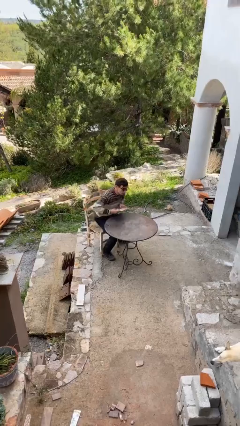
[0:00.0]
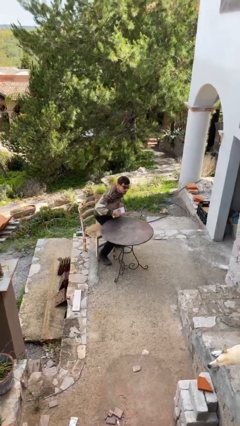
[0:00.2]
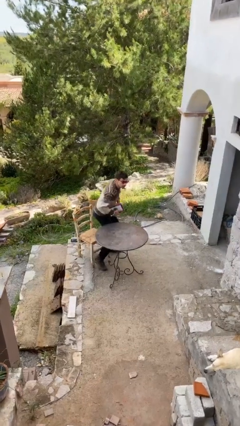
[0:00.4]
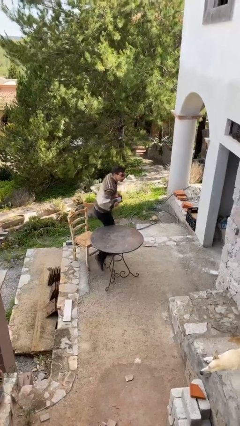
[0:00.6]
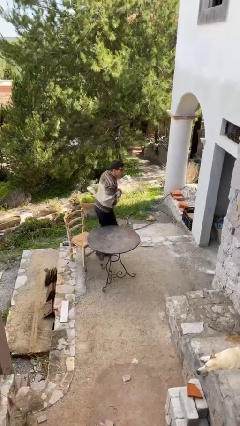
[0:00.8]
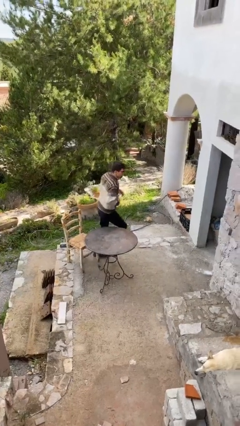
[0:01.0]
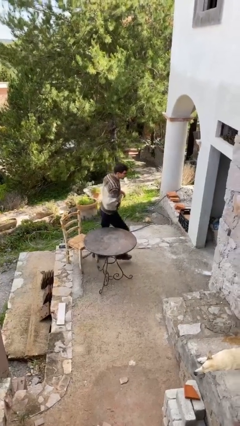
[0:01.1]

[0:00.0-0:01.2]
person stands up

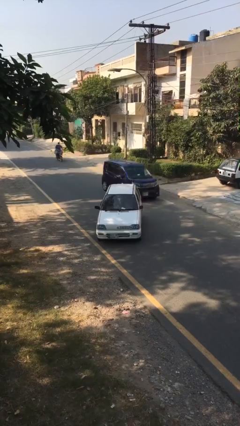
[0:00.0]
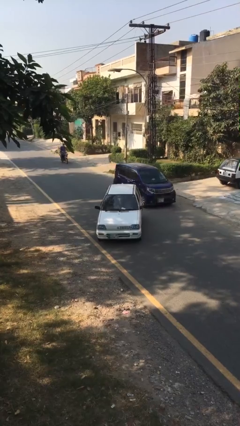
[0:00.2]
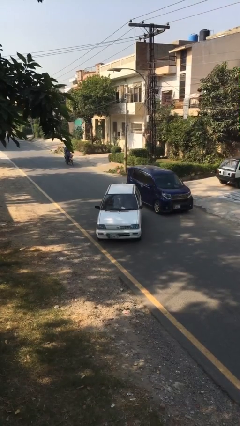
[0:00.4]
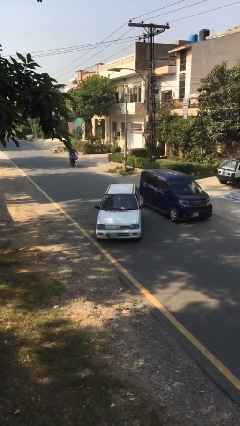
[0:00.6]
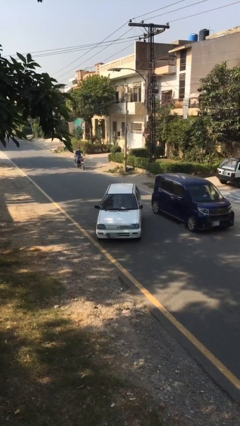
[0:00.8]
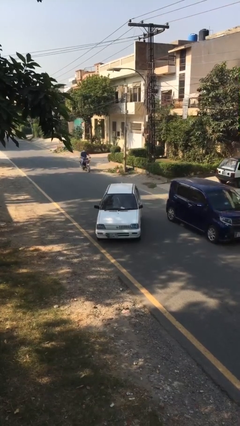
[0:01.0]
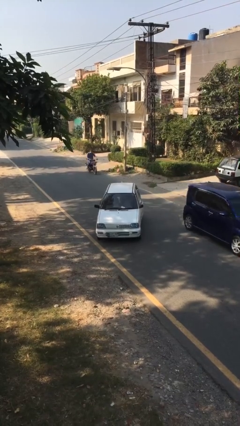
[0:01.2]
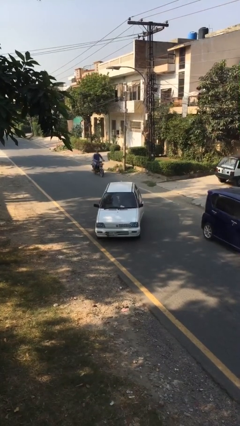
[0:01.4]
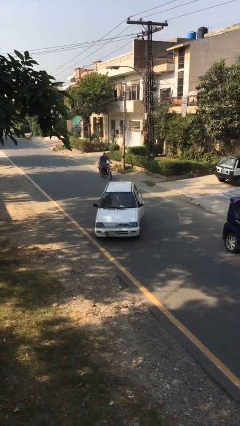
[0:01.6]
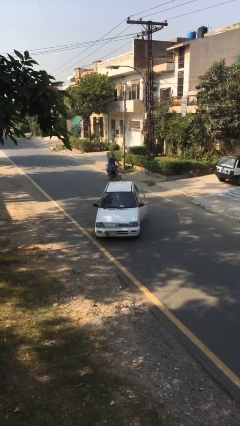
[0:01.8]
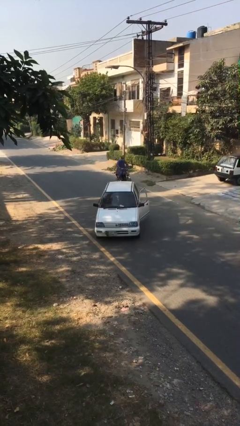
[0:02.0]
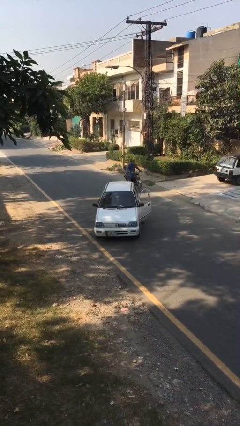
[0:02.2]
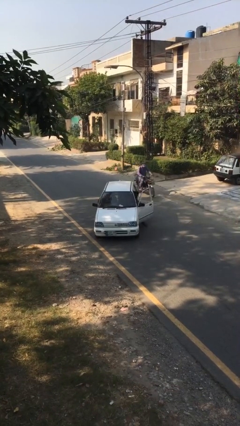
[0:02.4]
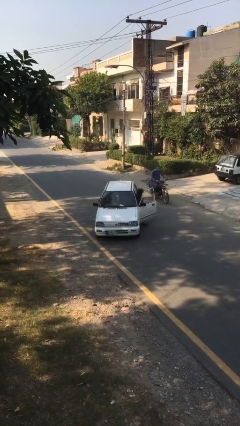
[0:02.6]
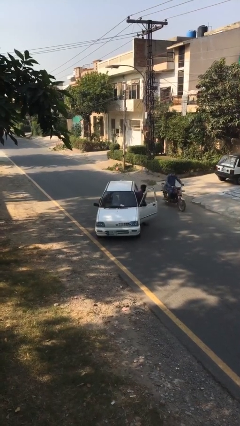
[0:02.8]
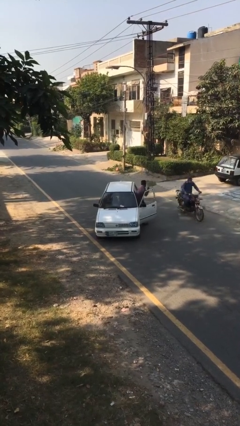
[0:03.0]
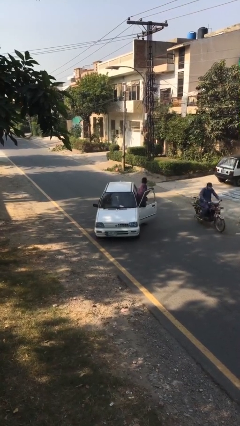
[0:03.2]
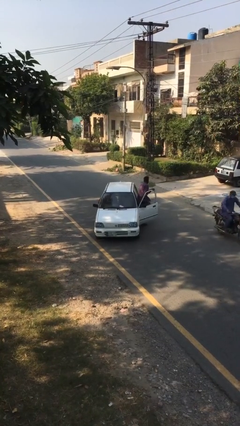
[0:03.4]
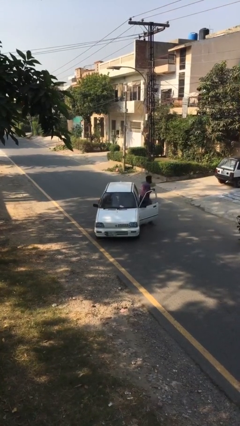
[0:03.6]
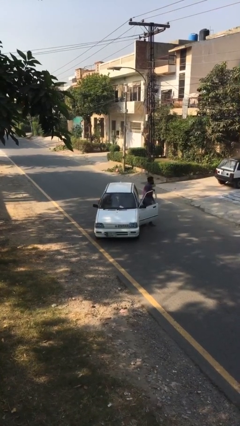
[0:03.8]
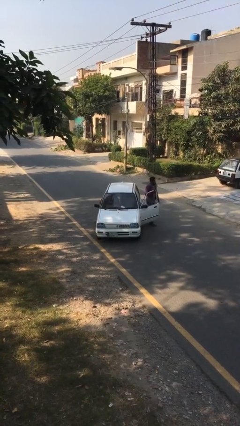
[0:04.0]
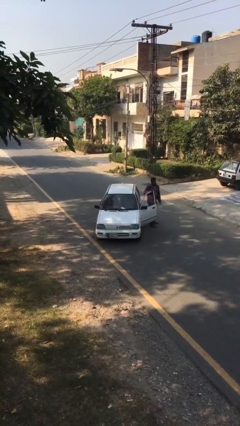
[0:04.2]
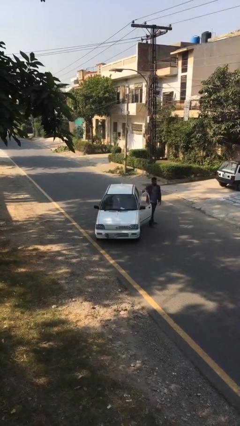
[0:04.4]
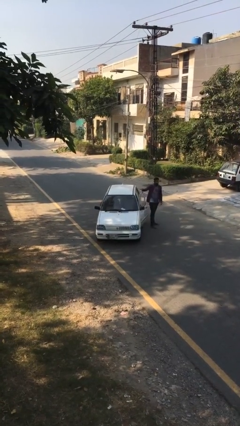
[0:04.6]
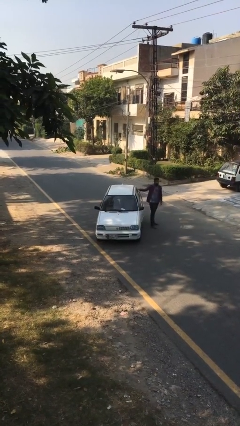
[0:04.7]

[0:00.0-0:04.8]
car drops off person

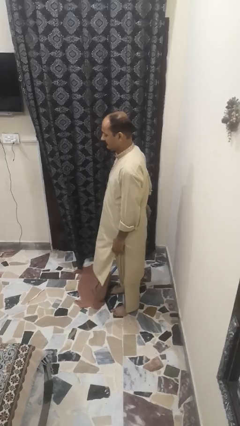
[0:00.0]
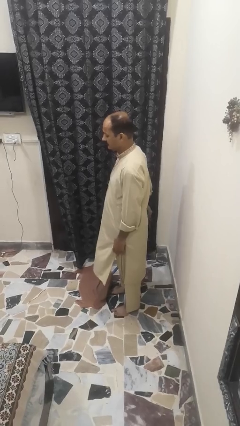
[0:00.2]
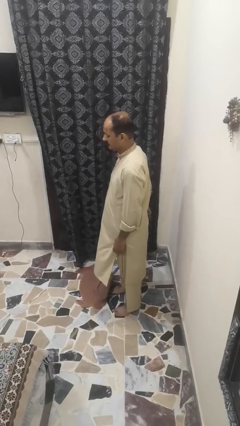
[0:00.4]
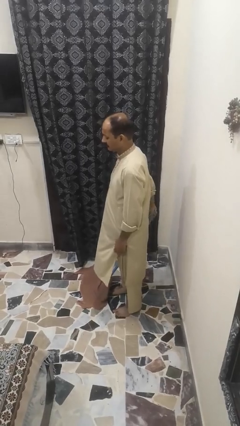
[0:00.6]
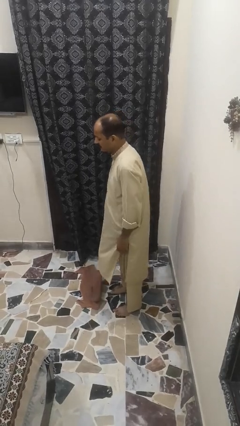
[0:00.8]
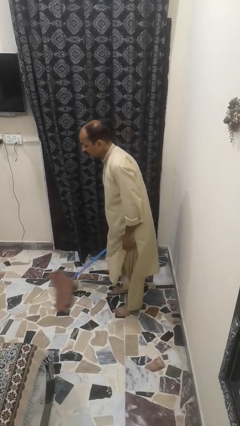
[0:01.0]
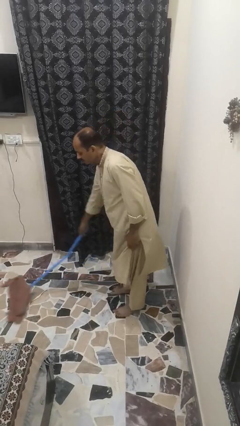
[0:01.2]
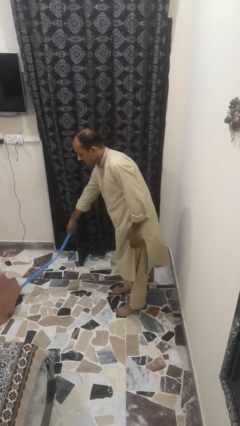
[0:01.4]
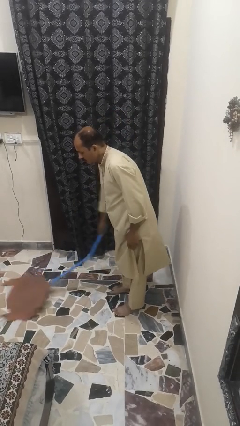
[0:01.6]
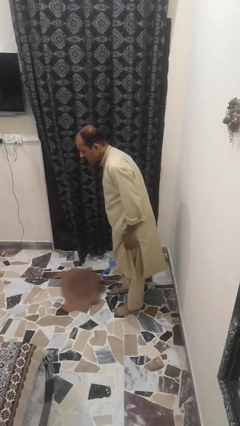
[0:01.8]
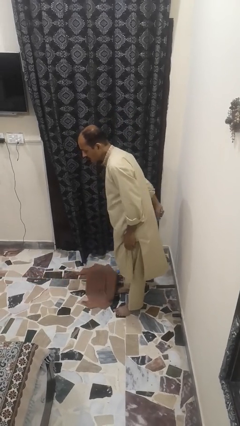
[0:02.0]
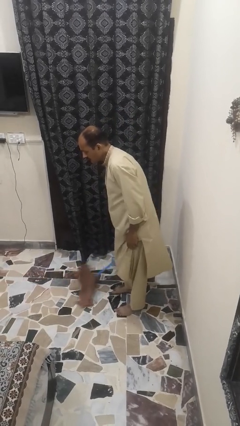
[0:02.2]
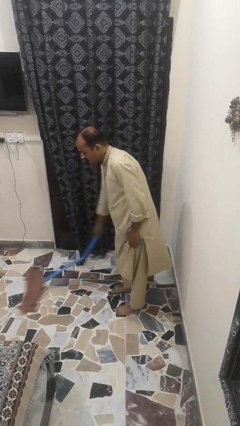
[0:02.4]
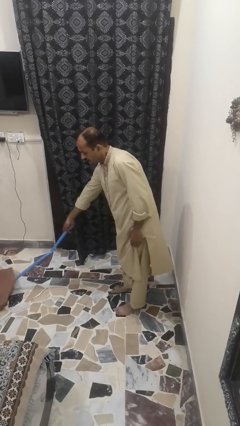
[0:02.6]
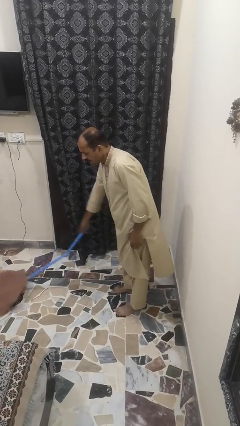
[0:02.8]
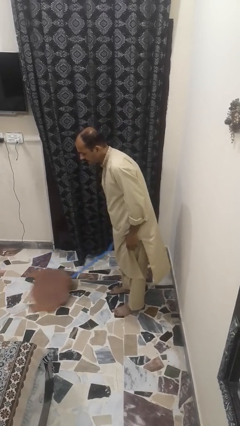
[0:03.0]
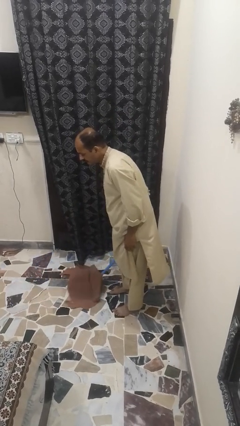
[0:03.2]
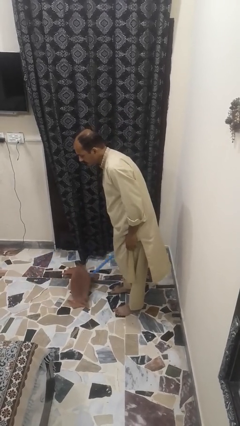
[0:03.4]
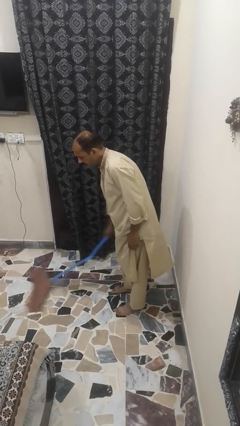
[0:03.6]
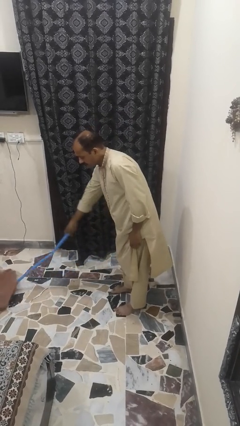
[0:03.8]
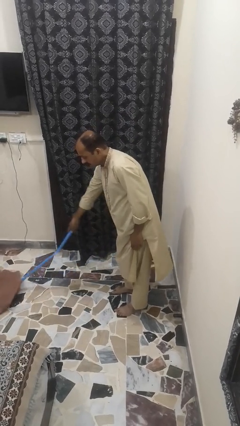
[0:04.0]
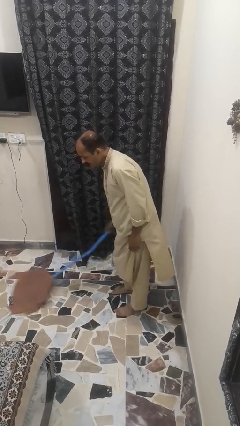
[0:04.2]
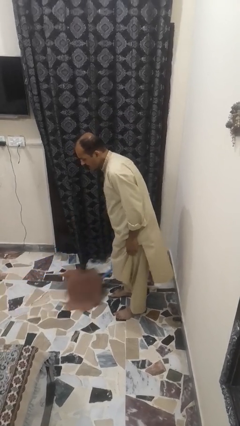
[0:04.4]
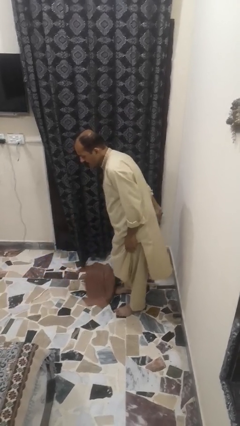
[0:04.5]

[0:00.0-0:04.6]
person mops

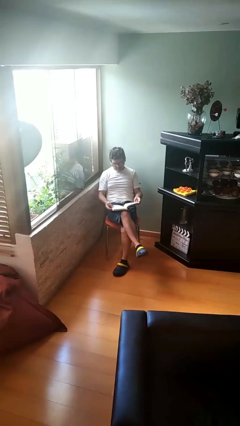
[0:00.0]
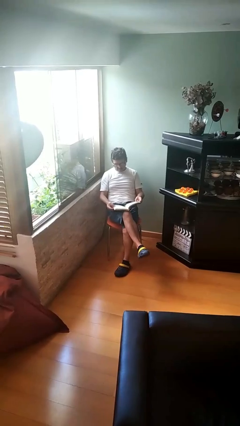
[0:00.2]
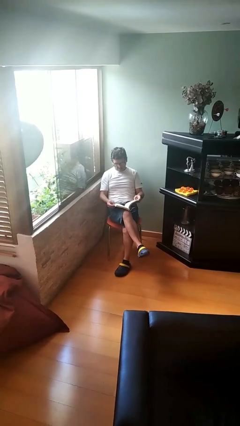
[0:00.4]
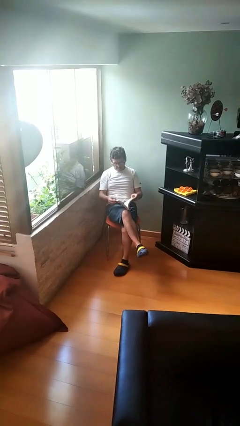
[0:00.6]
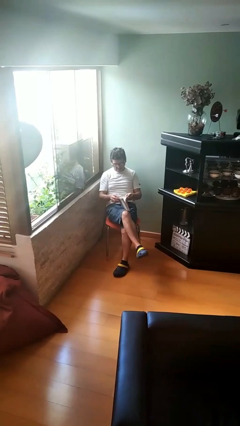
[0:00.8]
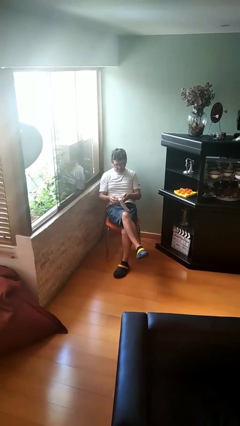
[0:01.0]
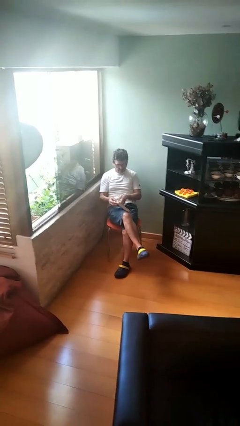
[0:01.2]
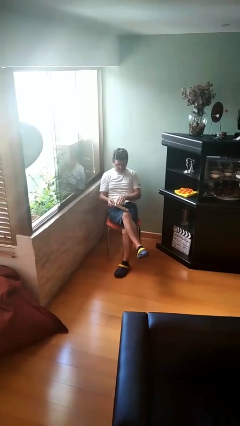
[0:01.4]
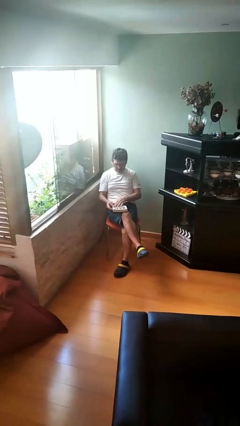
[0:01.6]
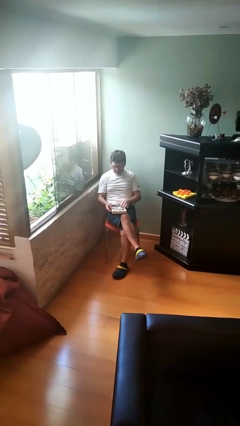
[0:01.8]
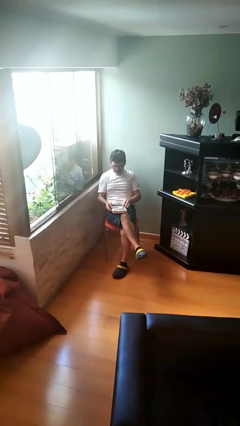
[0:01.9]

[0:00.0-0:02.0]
person reads document

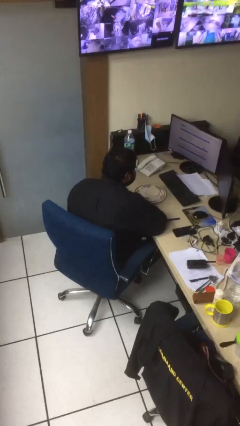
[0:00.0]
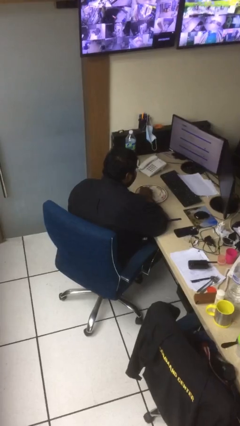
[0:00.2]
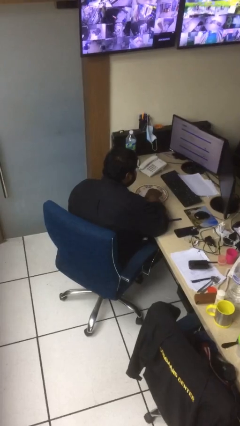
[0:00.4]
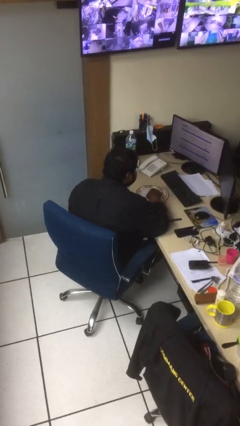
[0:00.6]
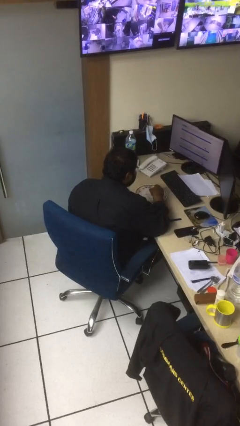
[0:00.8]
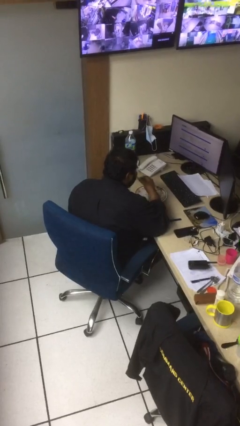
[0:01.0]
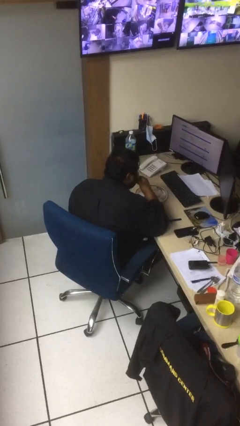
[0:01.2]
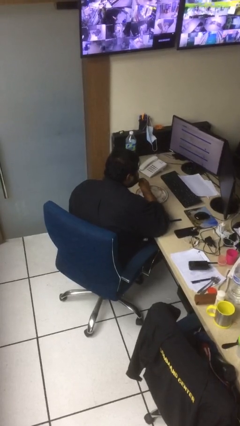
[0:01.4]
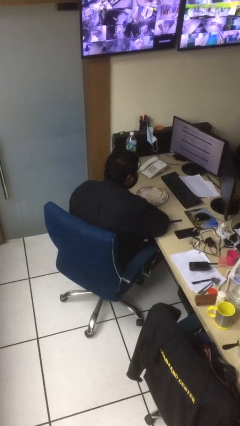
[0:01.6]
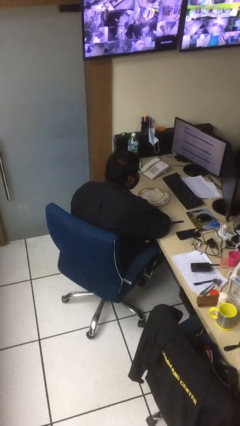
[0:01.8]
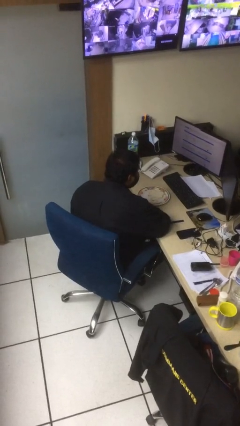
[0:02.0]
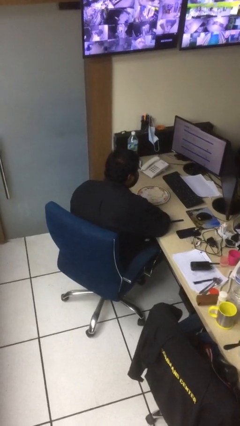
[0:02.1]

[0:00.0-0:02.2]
person eats with hands

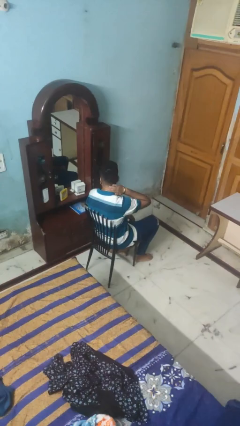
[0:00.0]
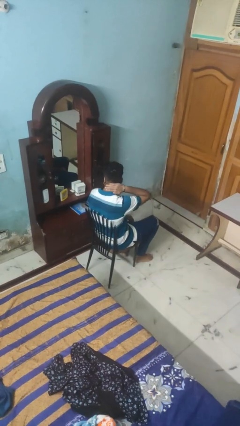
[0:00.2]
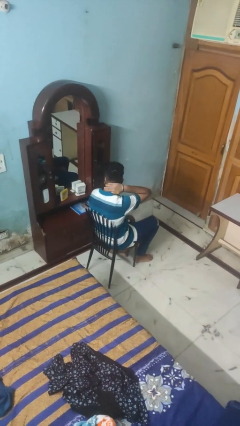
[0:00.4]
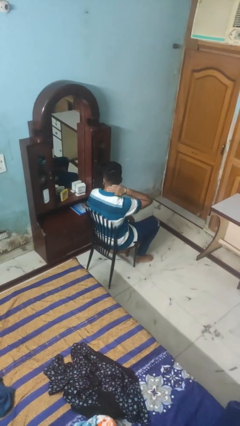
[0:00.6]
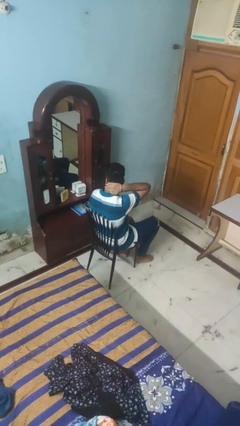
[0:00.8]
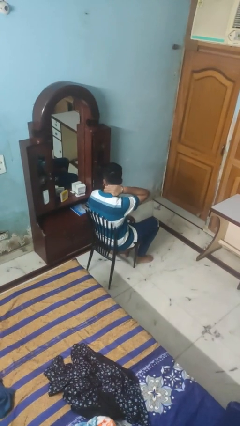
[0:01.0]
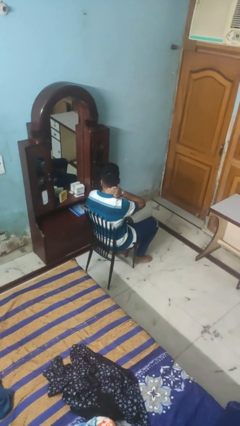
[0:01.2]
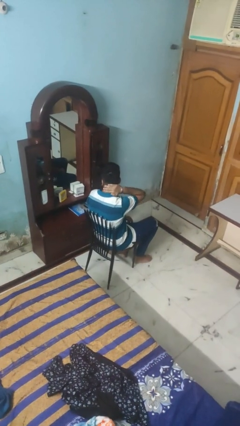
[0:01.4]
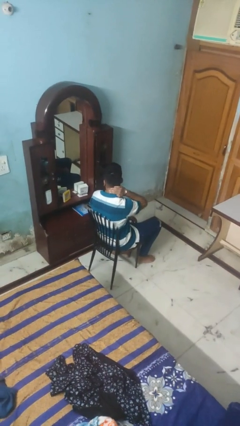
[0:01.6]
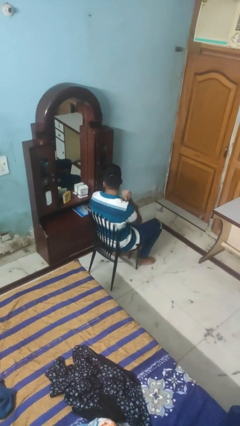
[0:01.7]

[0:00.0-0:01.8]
person rubs neck

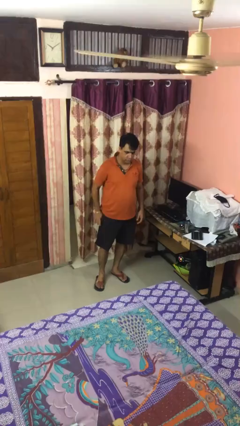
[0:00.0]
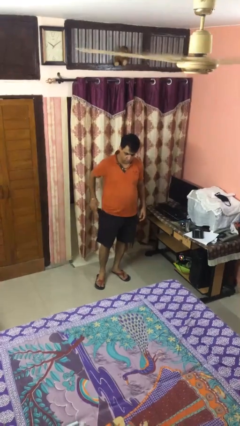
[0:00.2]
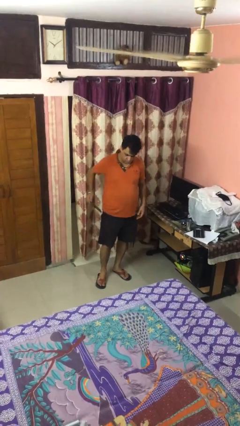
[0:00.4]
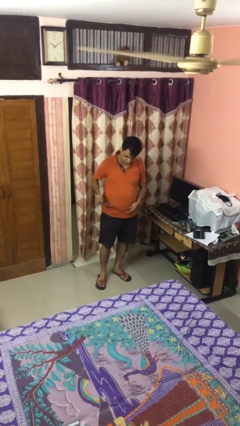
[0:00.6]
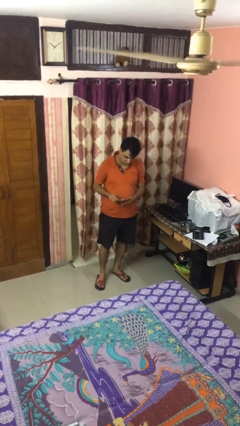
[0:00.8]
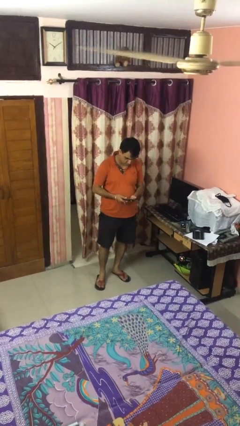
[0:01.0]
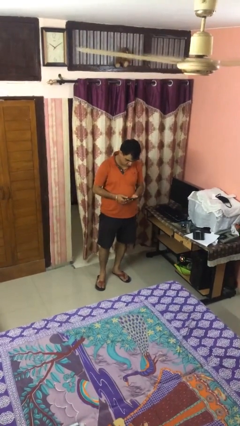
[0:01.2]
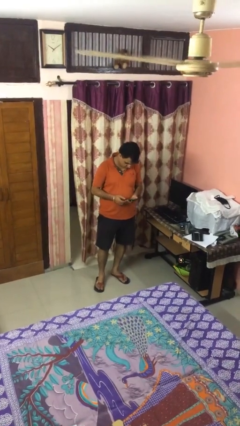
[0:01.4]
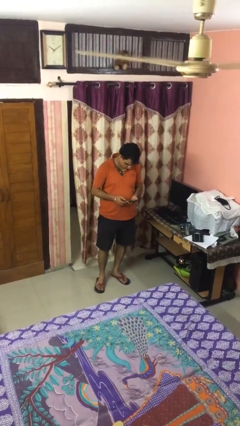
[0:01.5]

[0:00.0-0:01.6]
person takes phone from pocket
